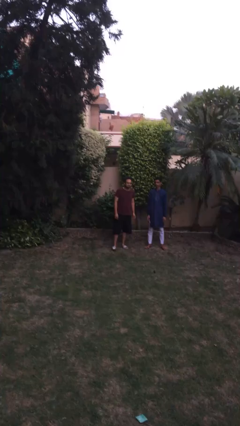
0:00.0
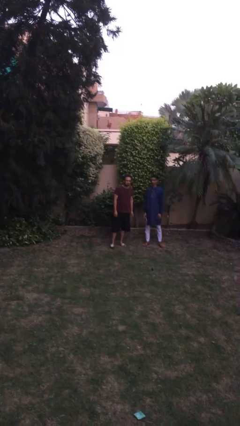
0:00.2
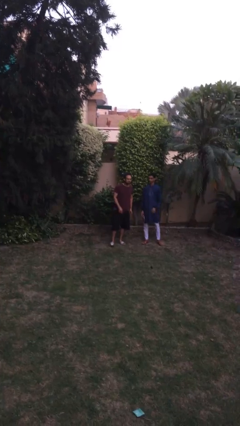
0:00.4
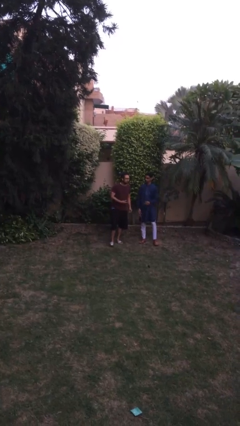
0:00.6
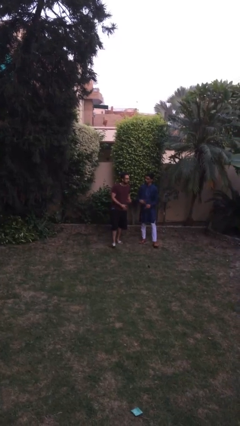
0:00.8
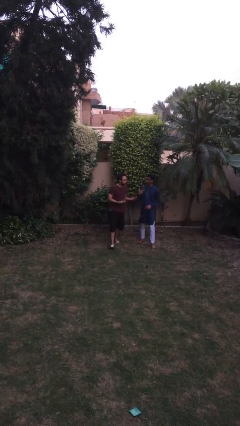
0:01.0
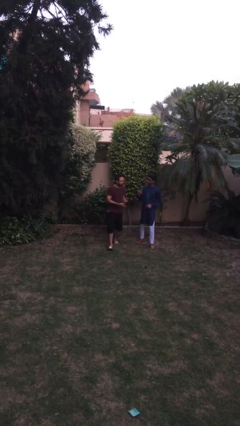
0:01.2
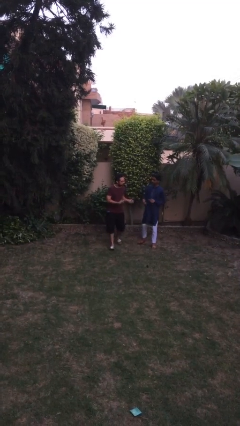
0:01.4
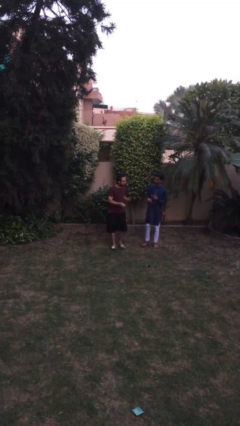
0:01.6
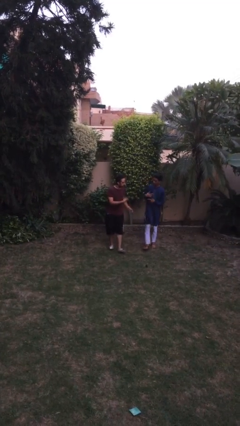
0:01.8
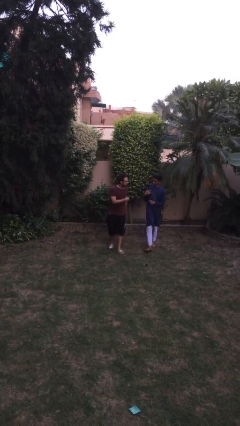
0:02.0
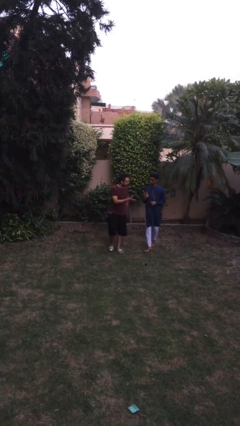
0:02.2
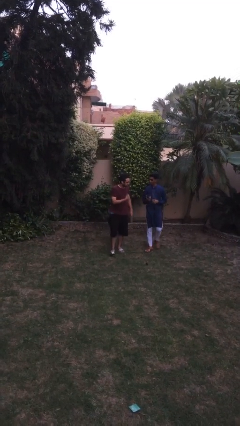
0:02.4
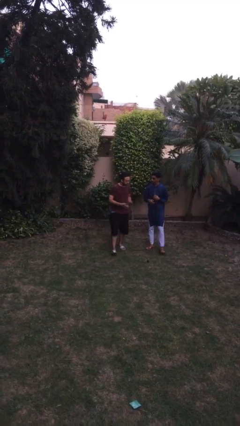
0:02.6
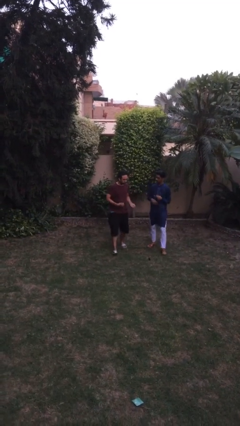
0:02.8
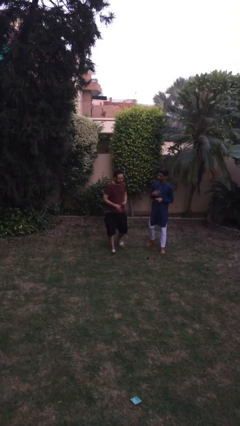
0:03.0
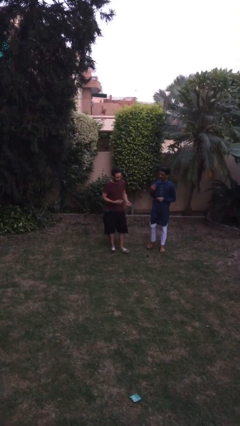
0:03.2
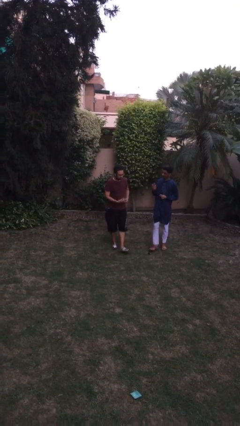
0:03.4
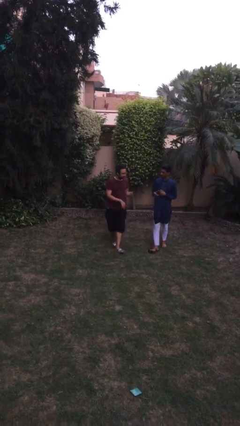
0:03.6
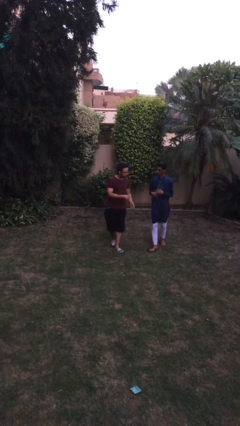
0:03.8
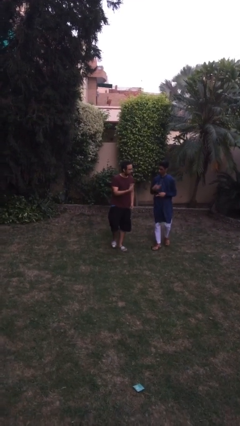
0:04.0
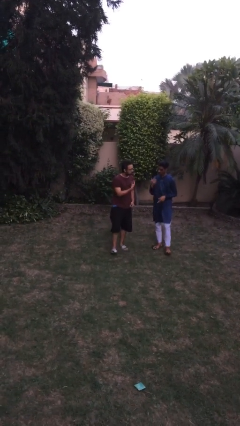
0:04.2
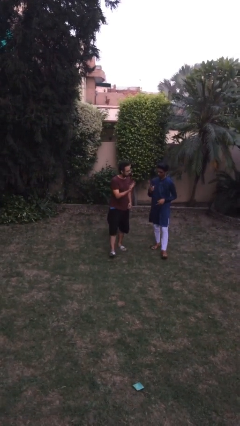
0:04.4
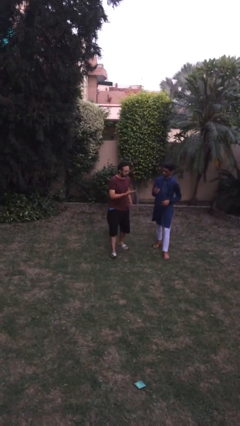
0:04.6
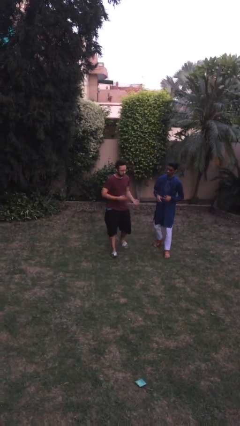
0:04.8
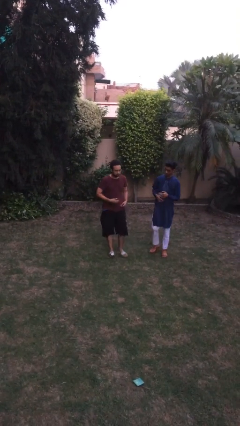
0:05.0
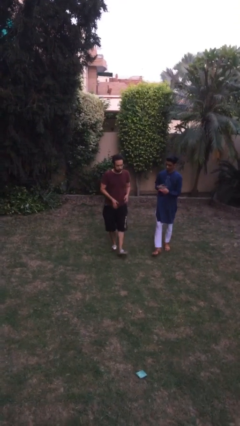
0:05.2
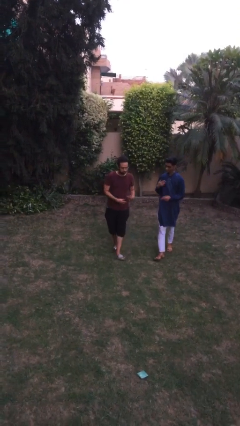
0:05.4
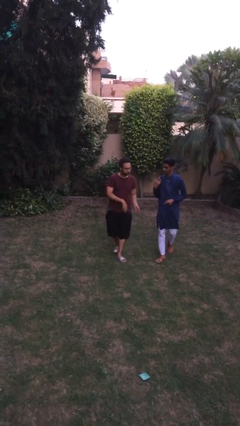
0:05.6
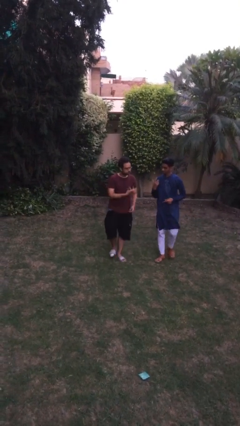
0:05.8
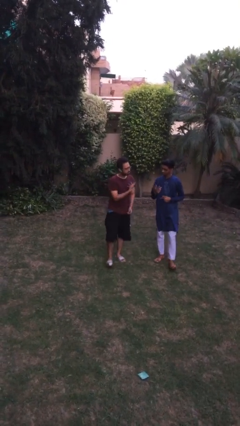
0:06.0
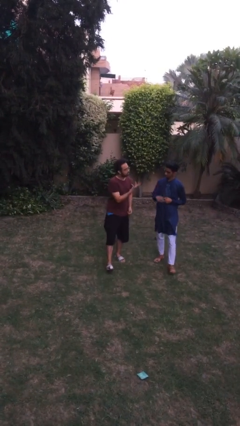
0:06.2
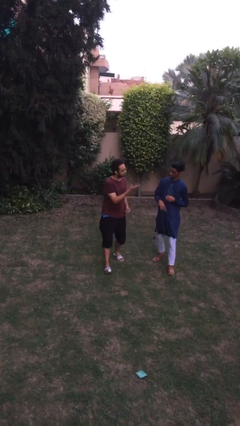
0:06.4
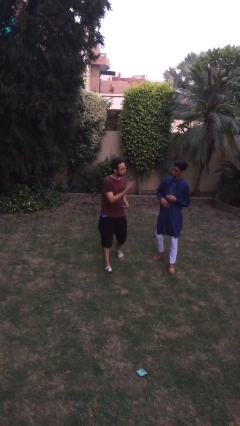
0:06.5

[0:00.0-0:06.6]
person talks to person

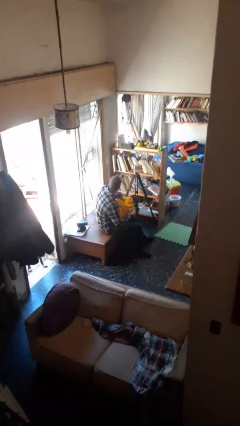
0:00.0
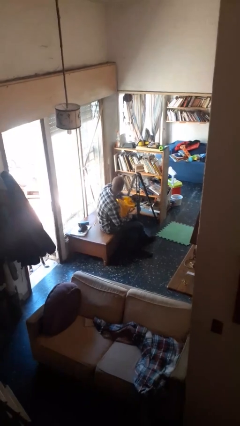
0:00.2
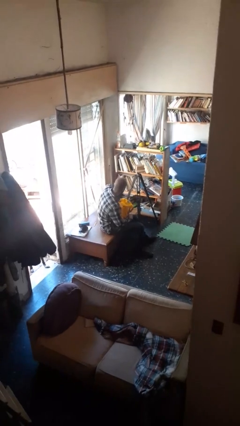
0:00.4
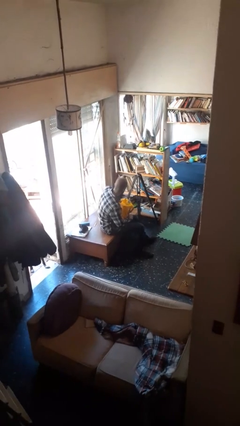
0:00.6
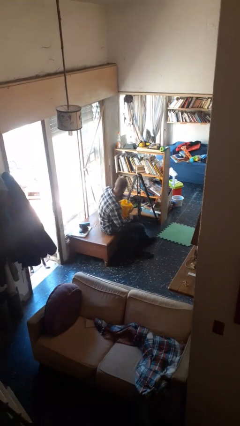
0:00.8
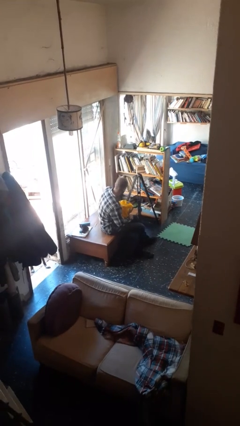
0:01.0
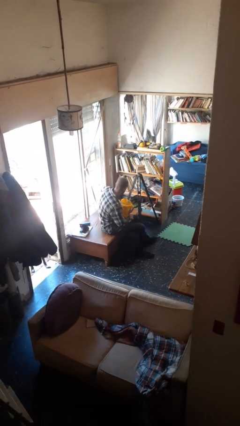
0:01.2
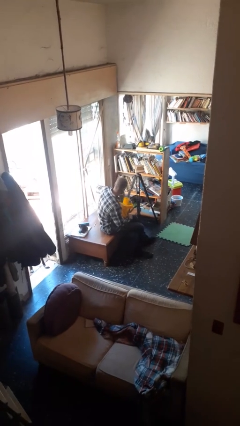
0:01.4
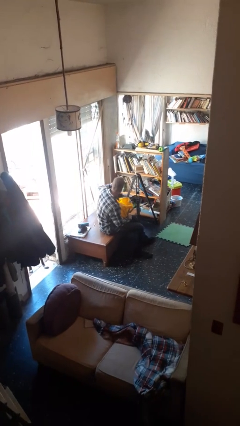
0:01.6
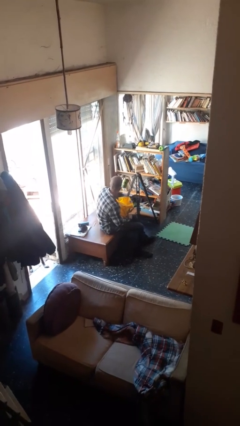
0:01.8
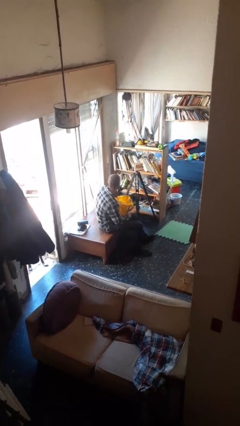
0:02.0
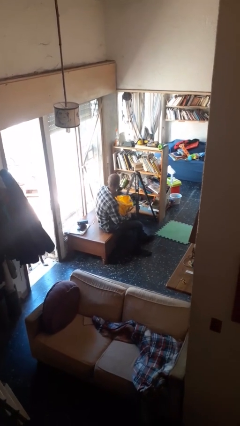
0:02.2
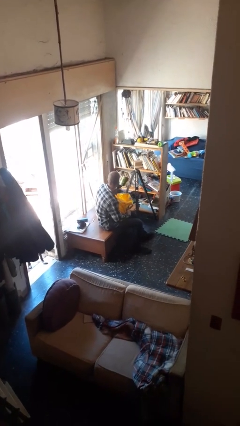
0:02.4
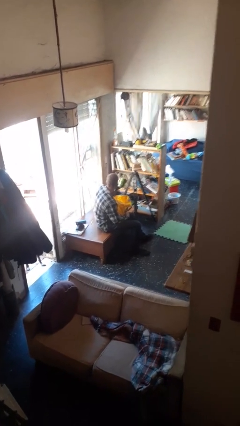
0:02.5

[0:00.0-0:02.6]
person takes object from bag

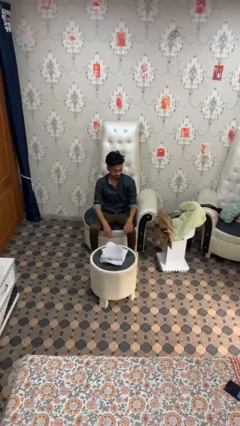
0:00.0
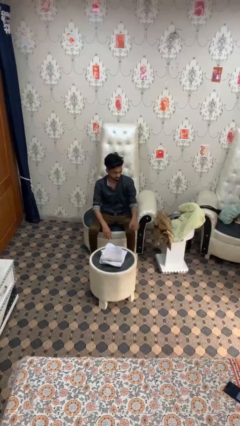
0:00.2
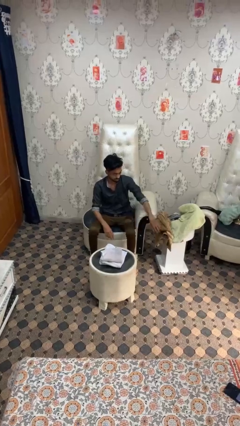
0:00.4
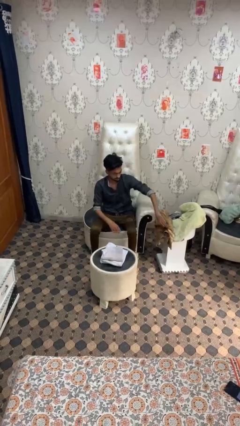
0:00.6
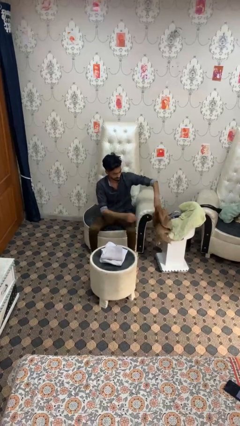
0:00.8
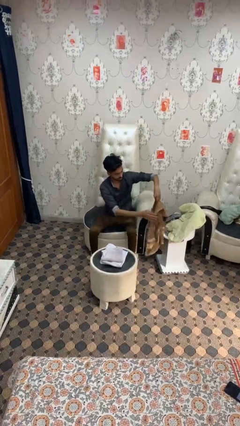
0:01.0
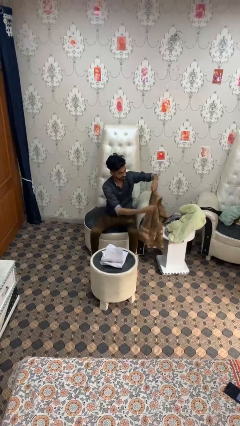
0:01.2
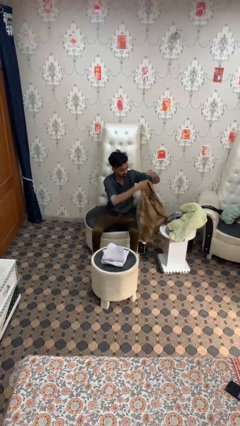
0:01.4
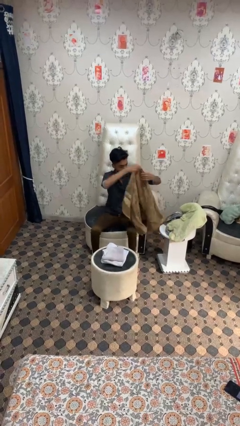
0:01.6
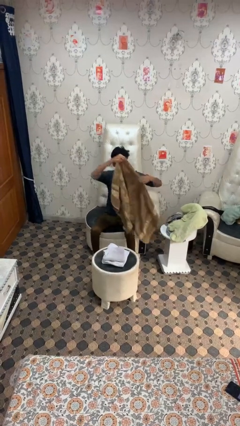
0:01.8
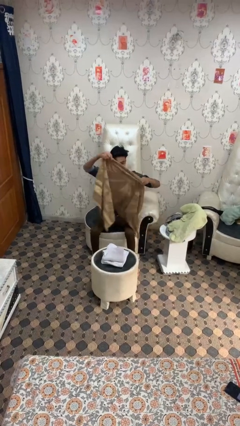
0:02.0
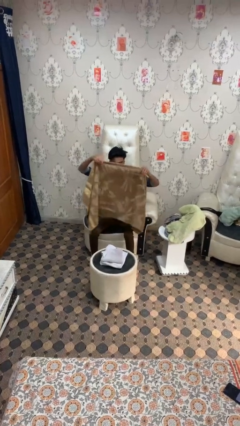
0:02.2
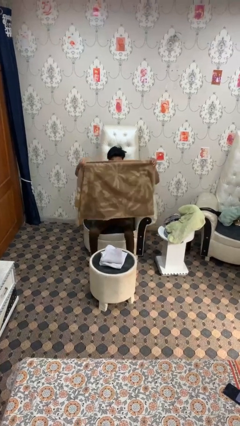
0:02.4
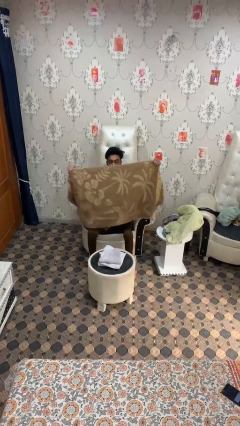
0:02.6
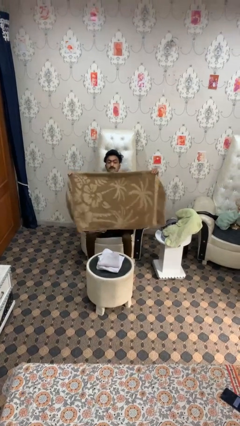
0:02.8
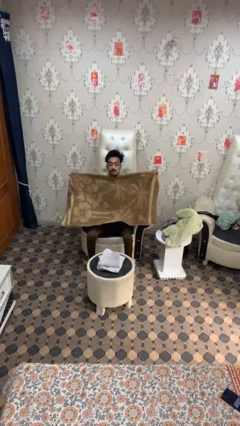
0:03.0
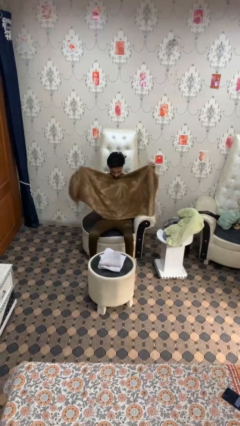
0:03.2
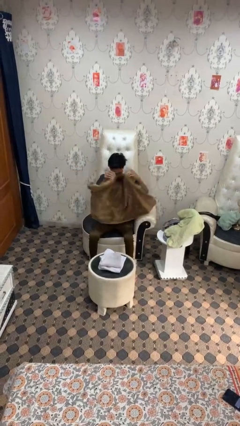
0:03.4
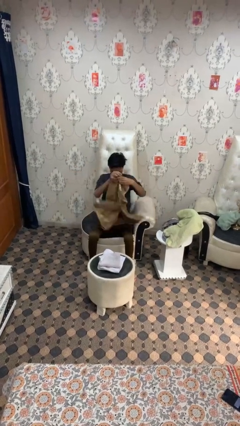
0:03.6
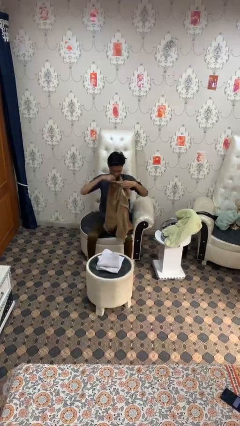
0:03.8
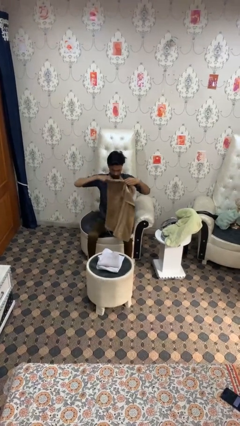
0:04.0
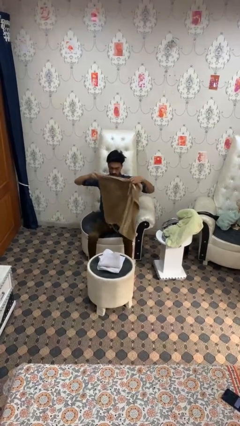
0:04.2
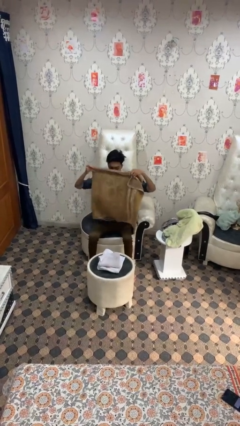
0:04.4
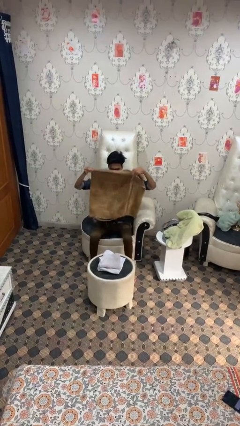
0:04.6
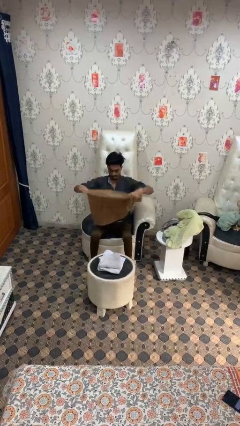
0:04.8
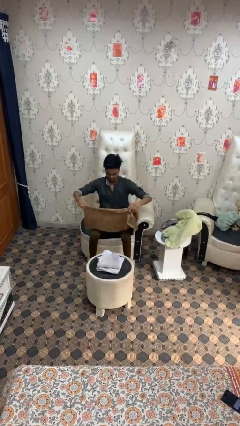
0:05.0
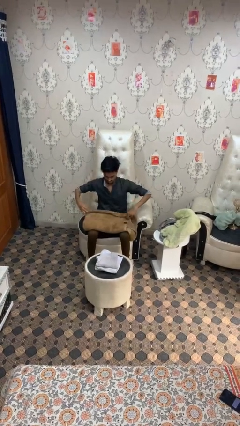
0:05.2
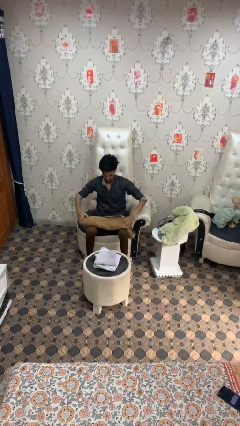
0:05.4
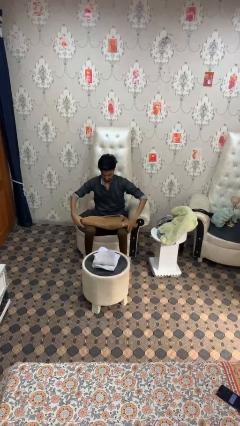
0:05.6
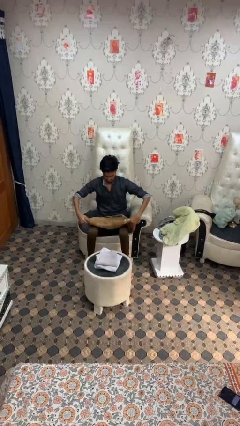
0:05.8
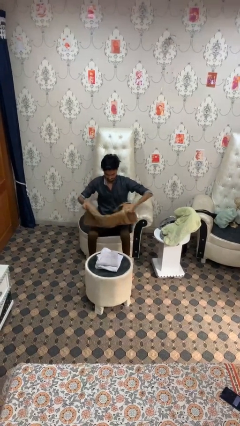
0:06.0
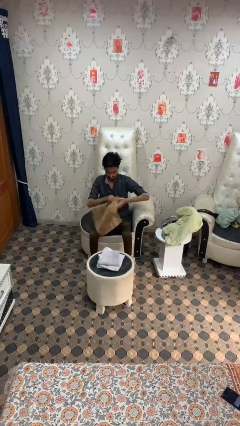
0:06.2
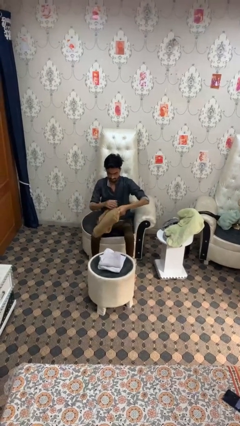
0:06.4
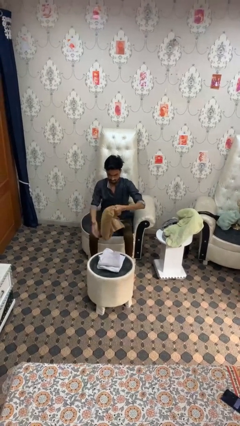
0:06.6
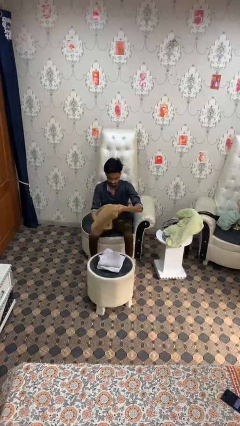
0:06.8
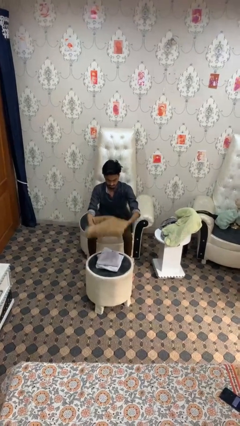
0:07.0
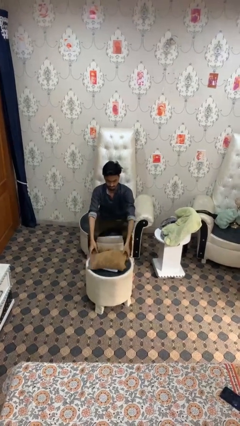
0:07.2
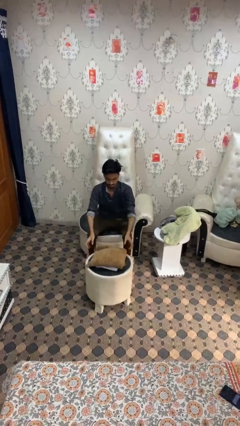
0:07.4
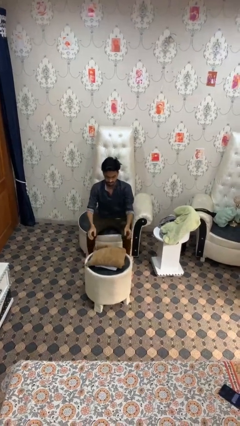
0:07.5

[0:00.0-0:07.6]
person folds towel

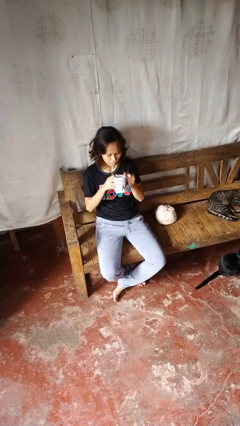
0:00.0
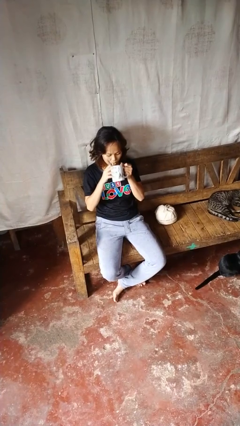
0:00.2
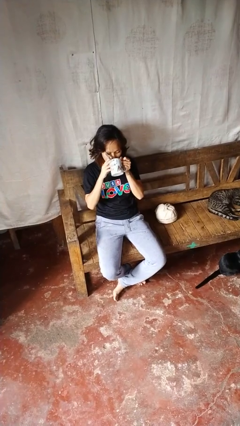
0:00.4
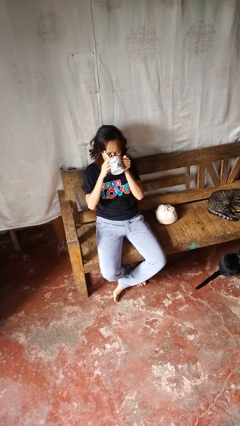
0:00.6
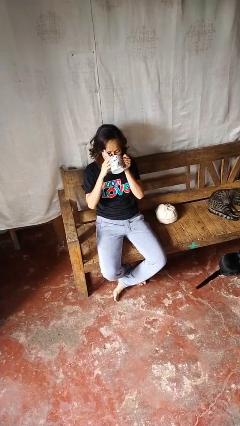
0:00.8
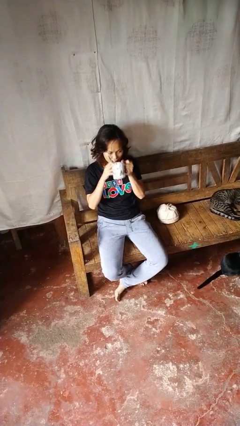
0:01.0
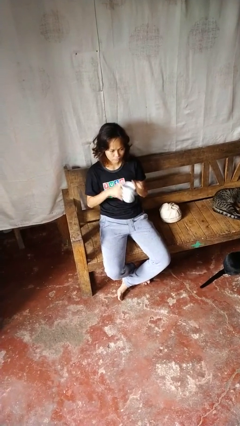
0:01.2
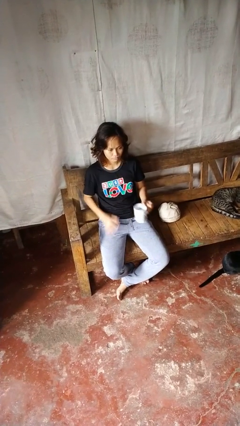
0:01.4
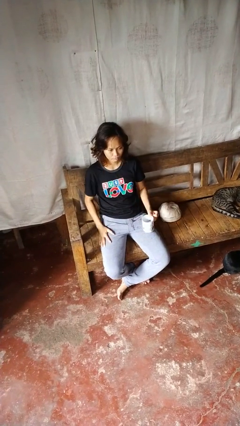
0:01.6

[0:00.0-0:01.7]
person drinks from mug
